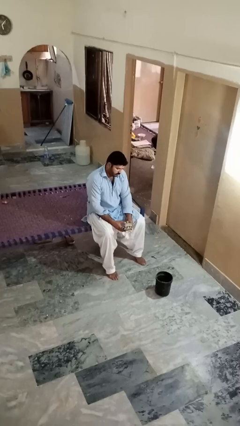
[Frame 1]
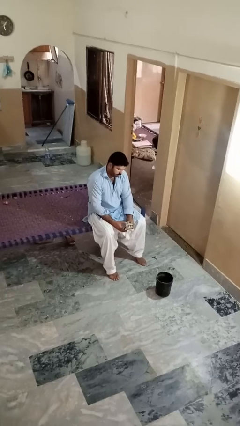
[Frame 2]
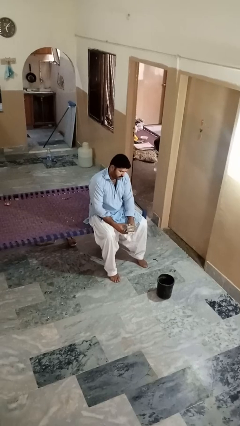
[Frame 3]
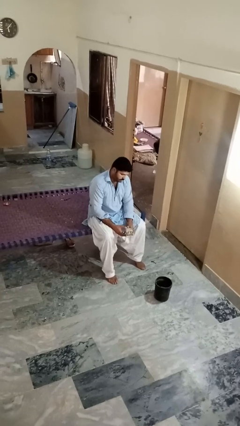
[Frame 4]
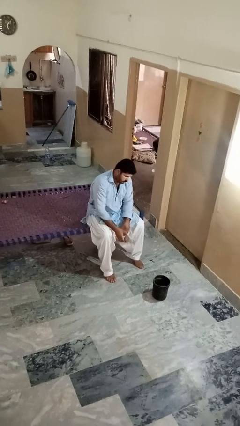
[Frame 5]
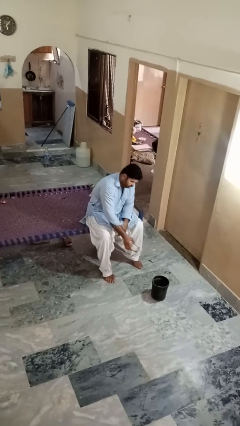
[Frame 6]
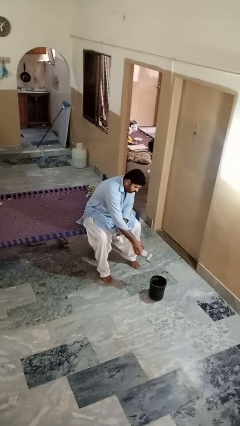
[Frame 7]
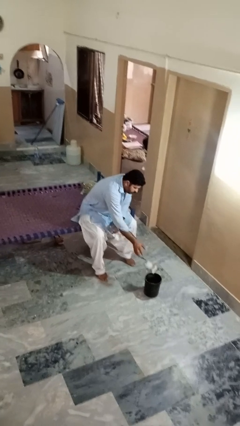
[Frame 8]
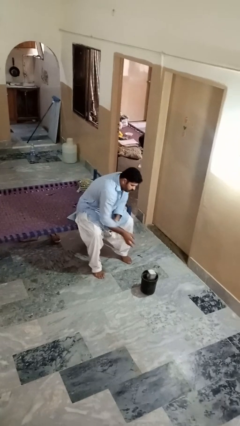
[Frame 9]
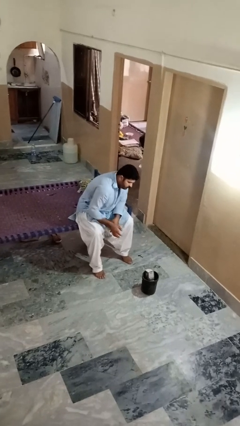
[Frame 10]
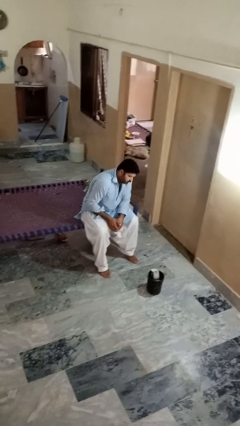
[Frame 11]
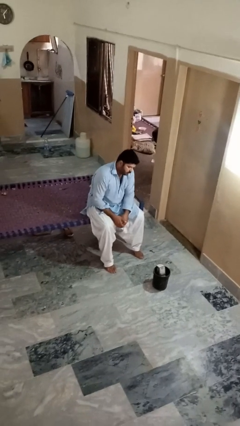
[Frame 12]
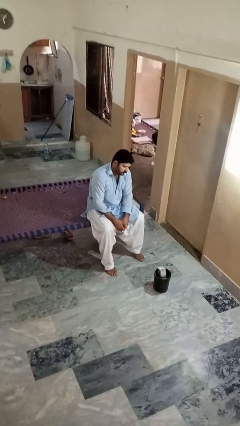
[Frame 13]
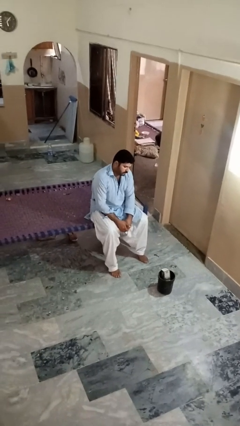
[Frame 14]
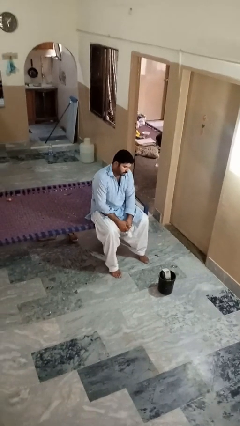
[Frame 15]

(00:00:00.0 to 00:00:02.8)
person puts object into basket

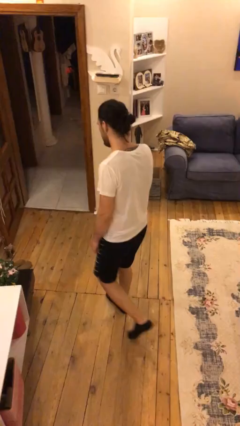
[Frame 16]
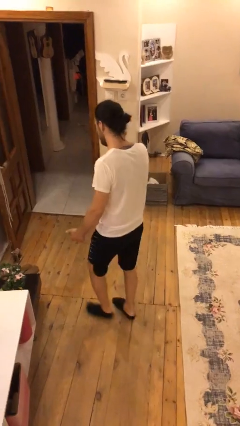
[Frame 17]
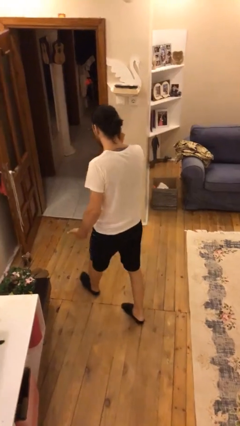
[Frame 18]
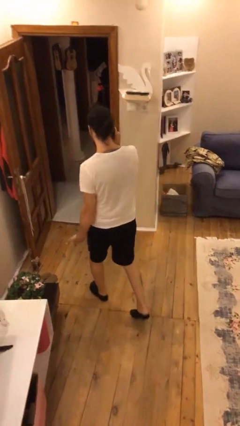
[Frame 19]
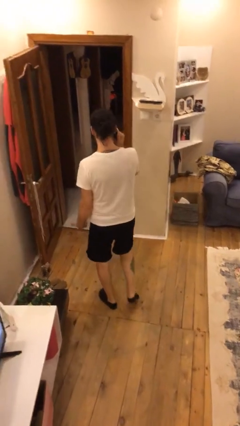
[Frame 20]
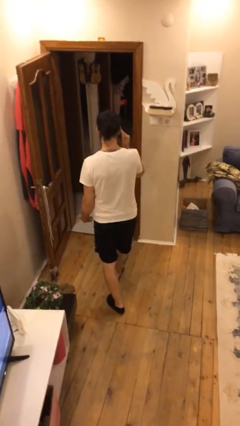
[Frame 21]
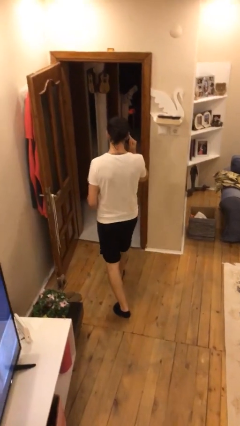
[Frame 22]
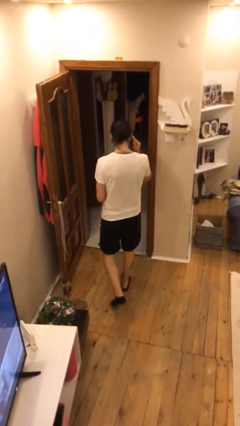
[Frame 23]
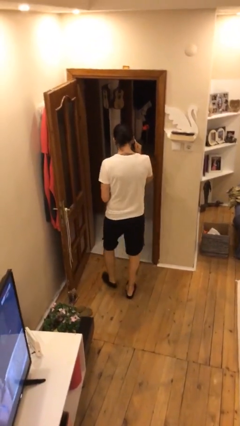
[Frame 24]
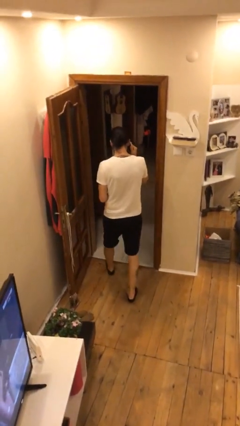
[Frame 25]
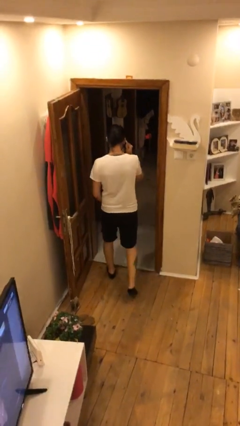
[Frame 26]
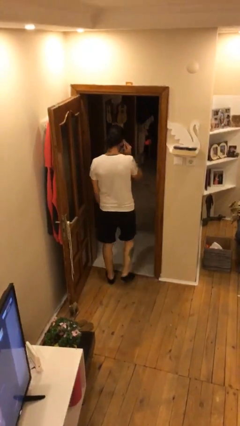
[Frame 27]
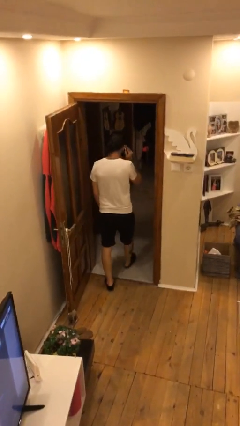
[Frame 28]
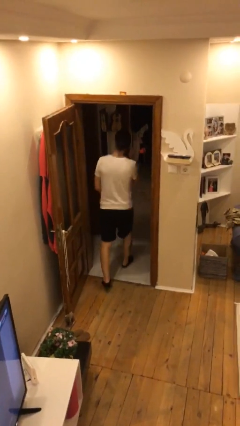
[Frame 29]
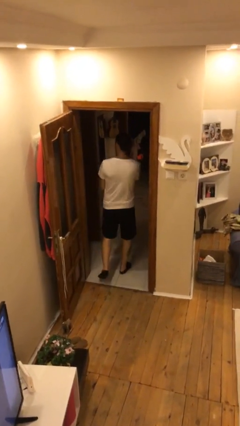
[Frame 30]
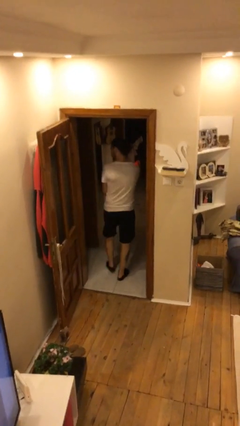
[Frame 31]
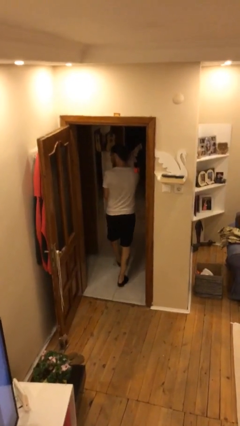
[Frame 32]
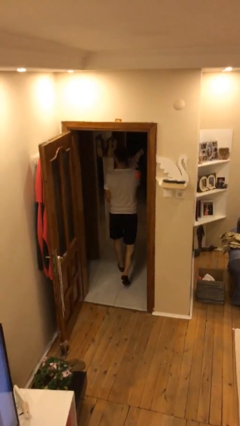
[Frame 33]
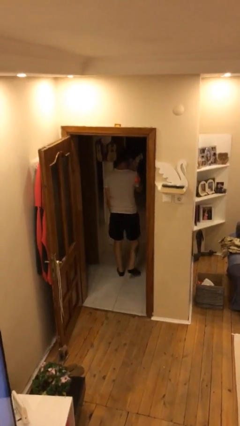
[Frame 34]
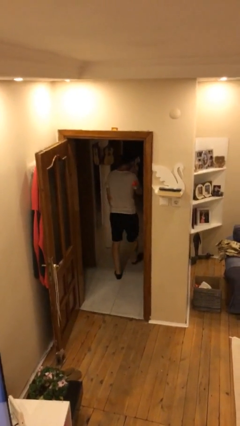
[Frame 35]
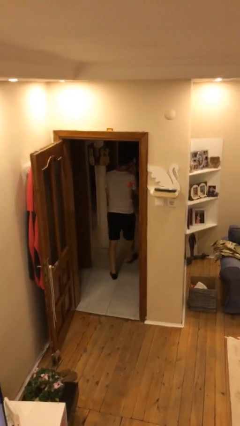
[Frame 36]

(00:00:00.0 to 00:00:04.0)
person exits scene through structure

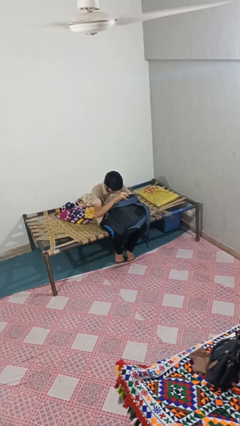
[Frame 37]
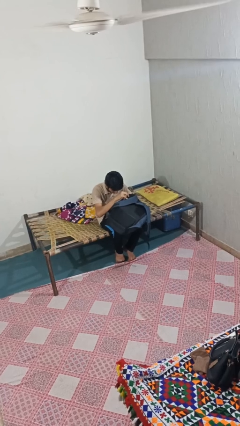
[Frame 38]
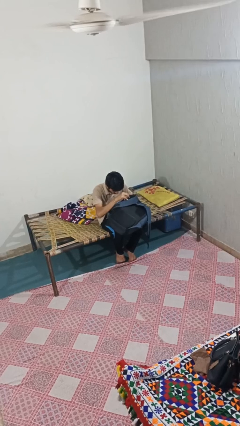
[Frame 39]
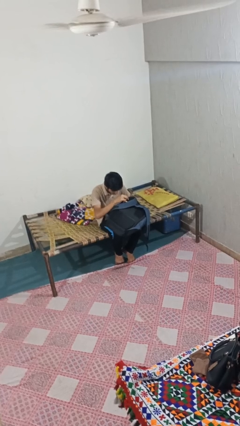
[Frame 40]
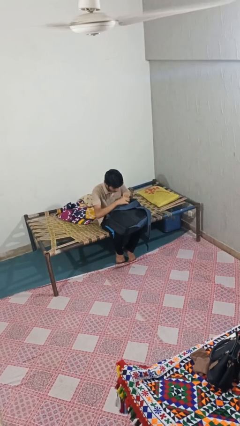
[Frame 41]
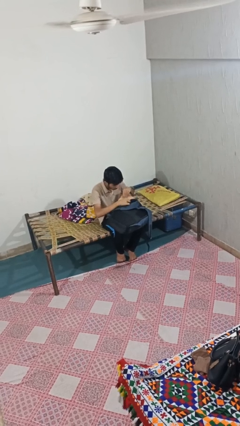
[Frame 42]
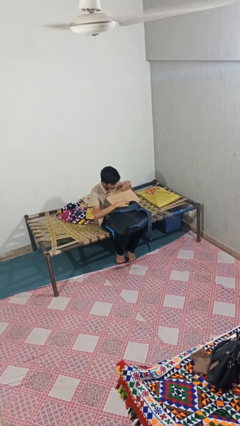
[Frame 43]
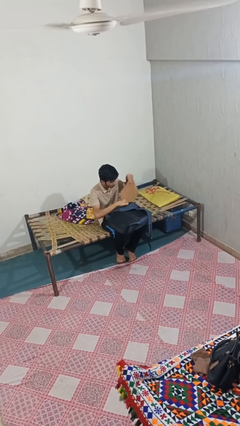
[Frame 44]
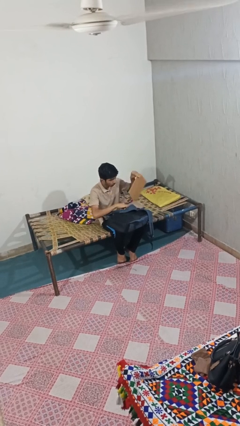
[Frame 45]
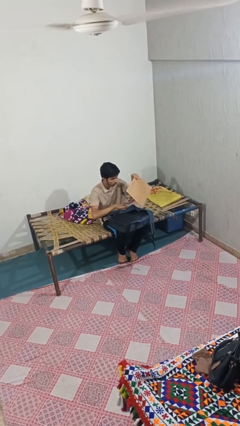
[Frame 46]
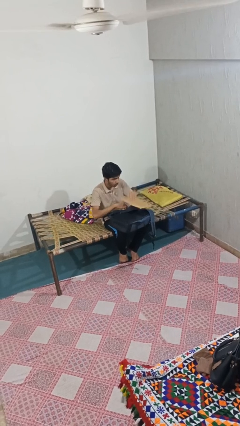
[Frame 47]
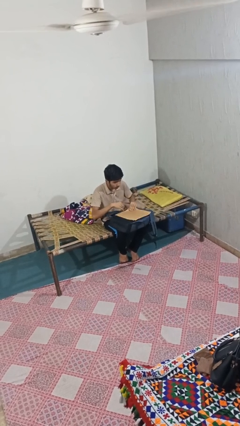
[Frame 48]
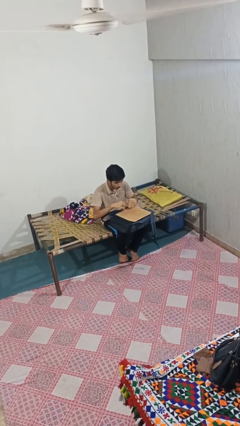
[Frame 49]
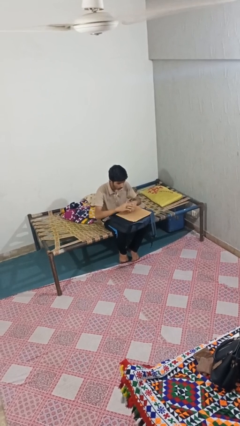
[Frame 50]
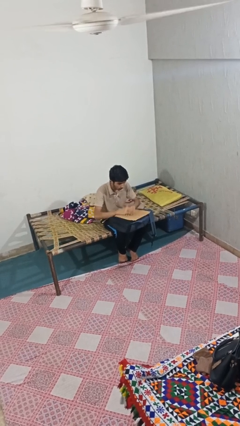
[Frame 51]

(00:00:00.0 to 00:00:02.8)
person takes object from backpack

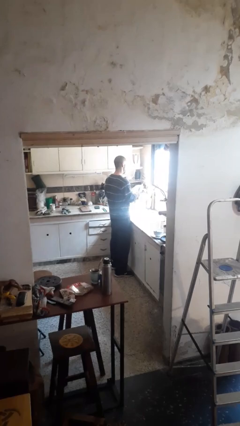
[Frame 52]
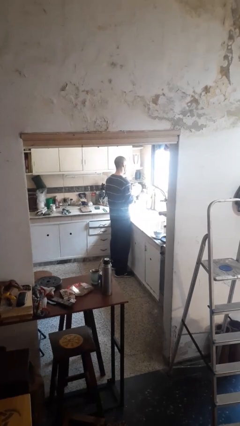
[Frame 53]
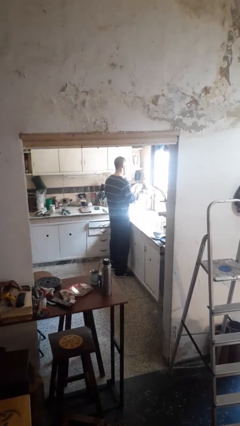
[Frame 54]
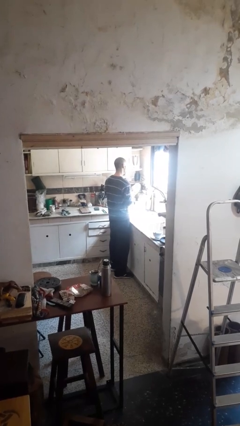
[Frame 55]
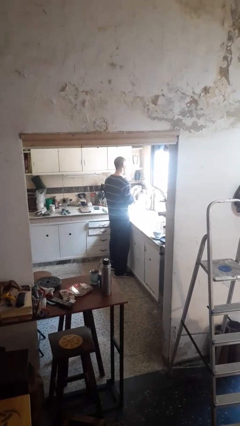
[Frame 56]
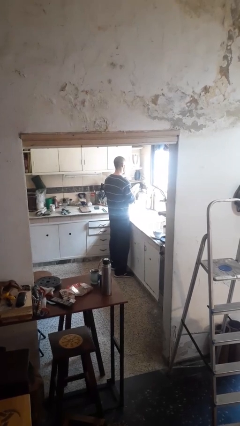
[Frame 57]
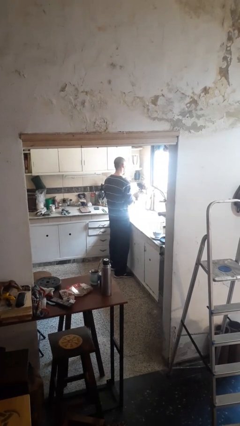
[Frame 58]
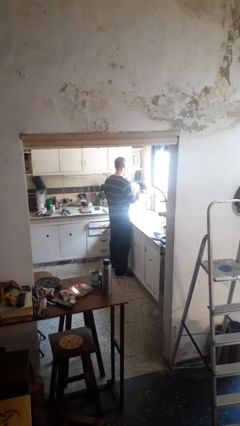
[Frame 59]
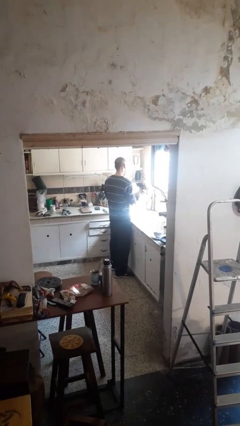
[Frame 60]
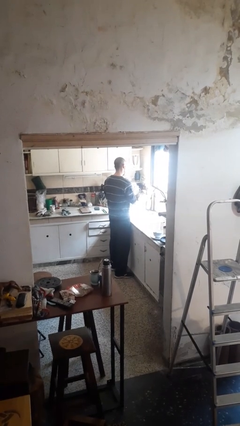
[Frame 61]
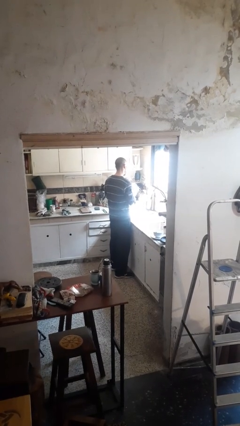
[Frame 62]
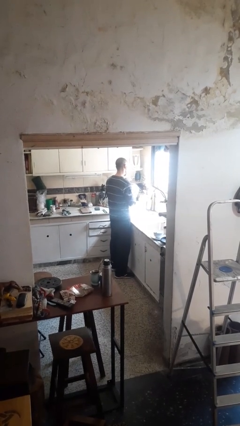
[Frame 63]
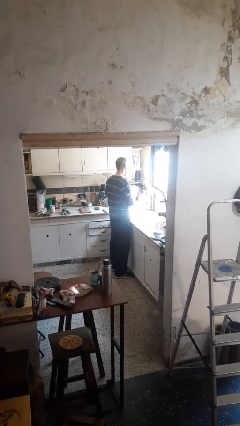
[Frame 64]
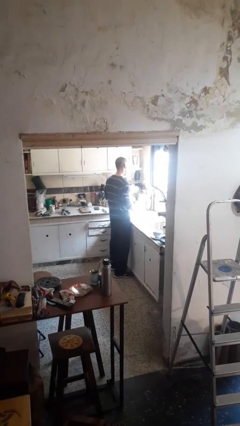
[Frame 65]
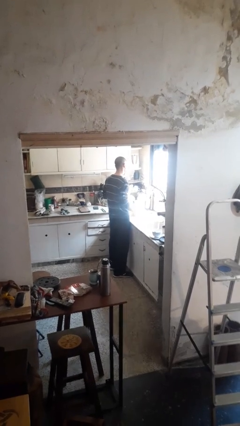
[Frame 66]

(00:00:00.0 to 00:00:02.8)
person washes dish

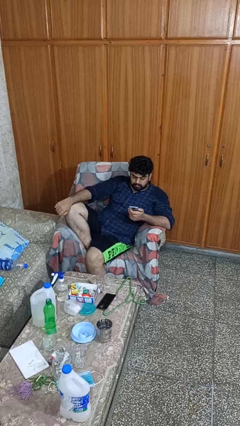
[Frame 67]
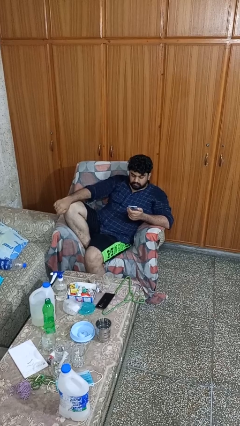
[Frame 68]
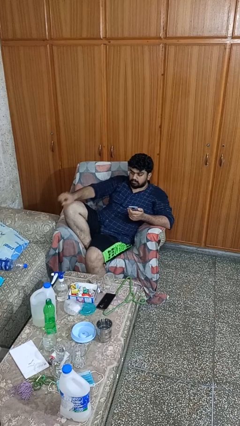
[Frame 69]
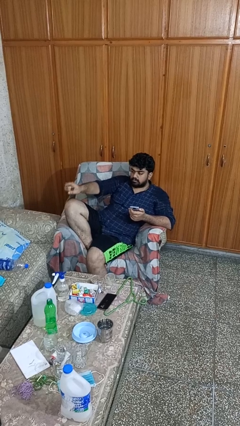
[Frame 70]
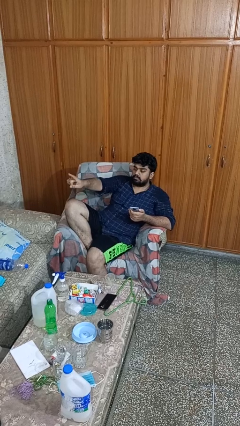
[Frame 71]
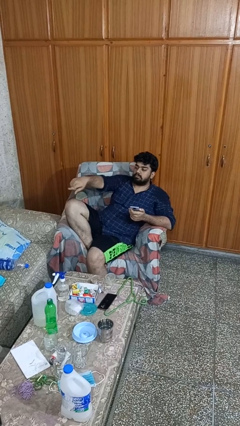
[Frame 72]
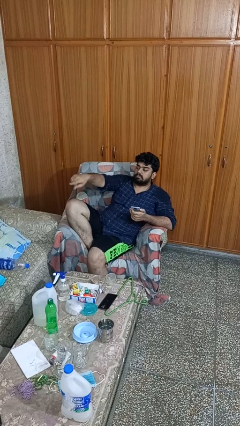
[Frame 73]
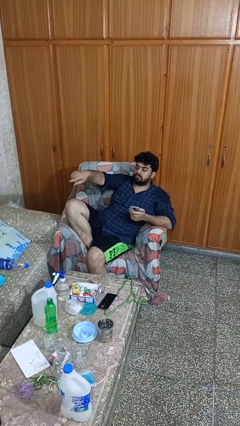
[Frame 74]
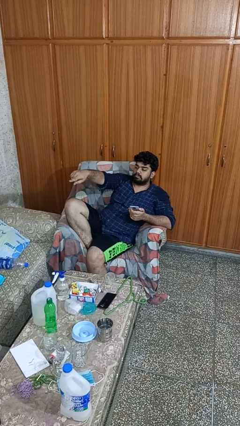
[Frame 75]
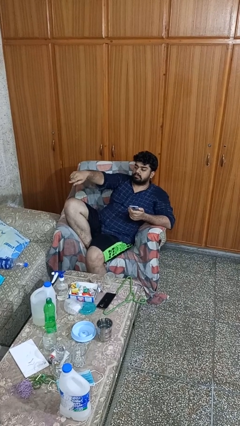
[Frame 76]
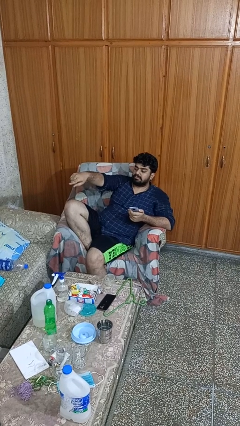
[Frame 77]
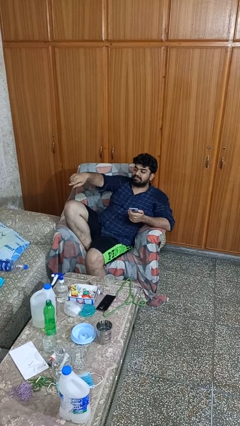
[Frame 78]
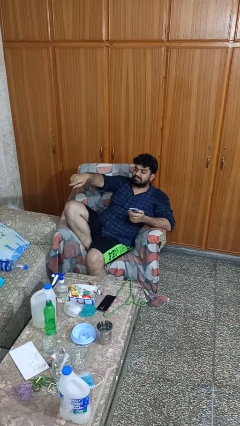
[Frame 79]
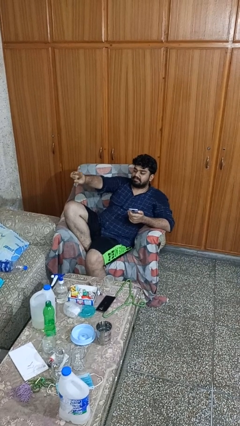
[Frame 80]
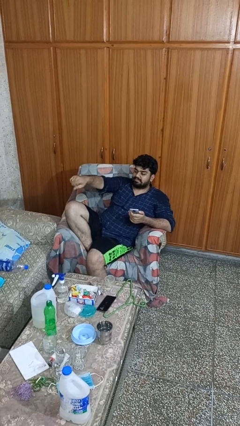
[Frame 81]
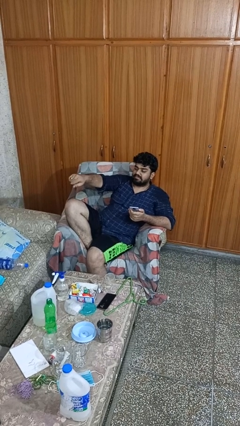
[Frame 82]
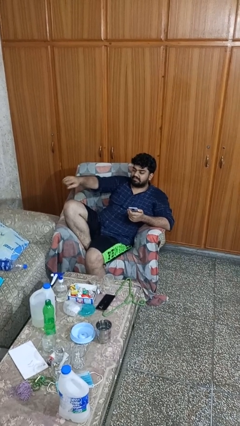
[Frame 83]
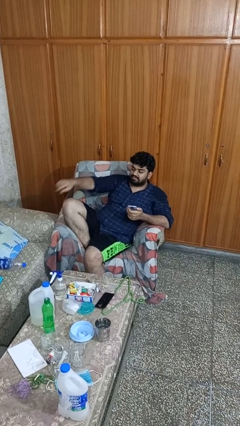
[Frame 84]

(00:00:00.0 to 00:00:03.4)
person points at person

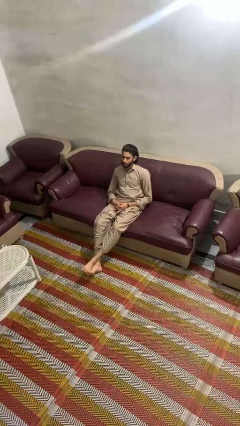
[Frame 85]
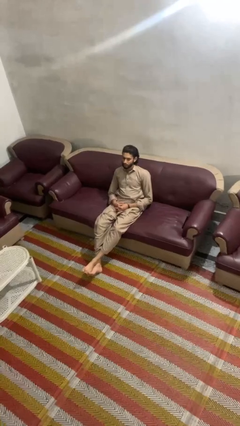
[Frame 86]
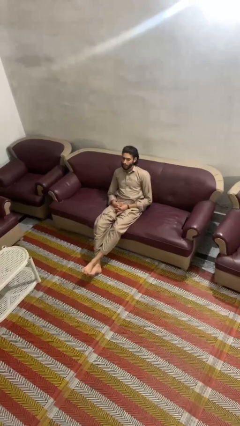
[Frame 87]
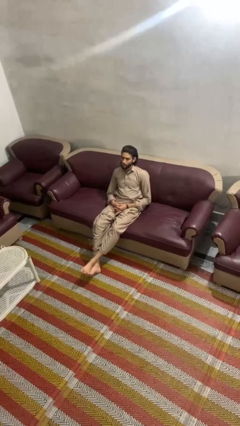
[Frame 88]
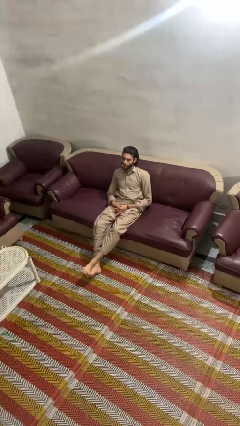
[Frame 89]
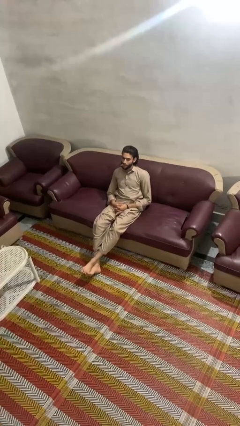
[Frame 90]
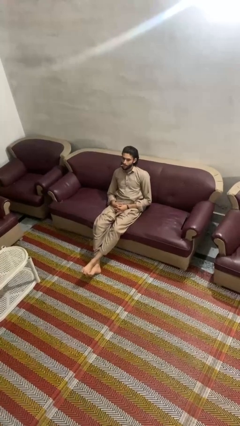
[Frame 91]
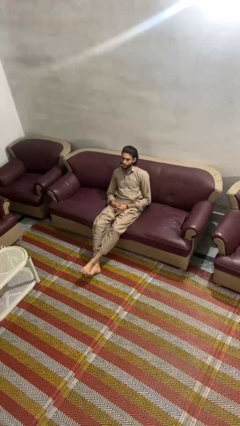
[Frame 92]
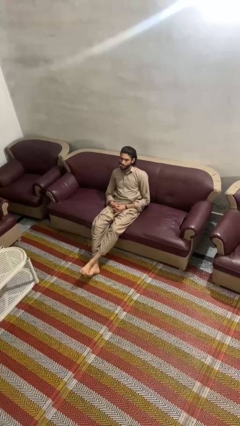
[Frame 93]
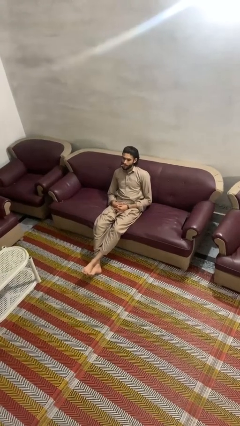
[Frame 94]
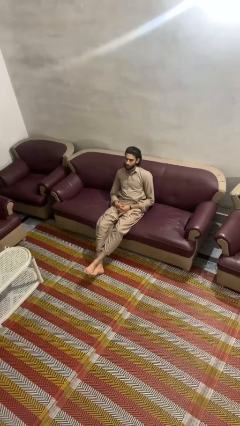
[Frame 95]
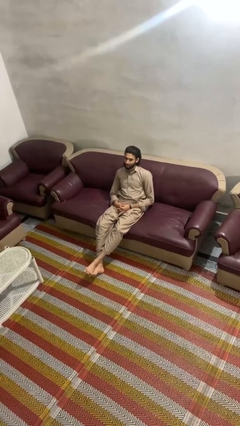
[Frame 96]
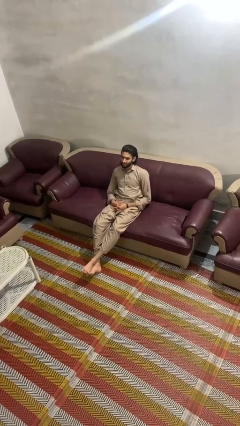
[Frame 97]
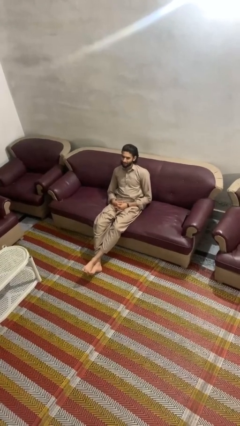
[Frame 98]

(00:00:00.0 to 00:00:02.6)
person sticks out tongue
